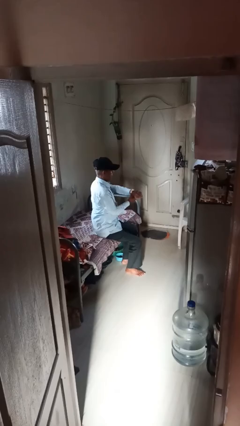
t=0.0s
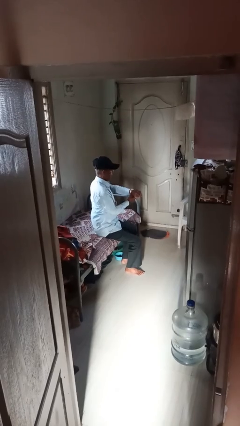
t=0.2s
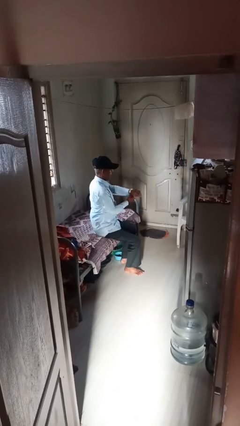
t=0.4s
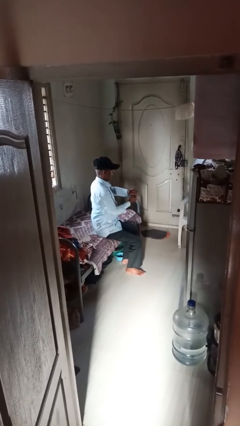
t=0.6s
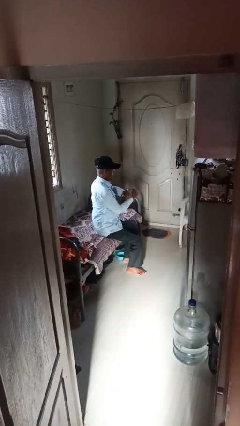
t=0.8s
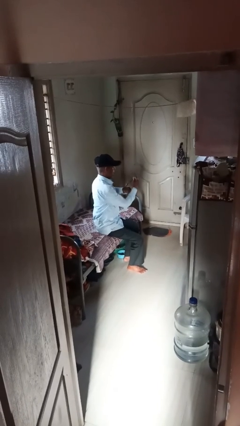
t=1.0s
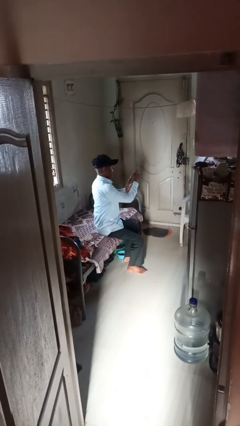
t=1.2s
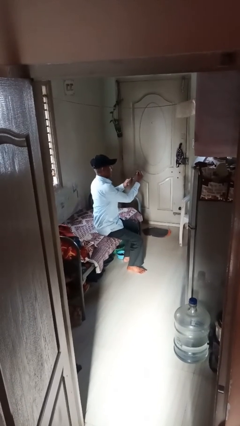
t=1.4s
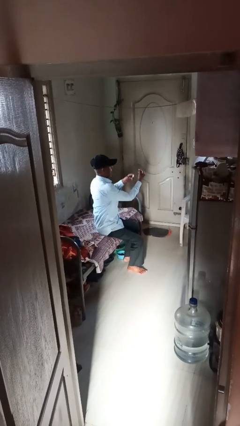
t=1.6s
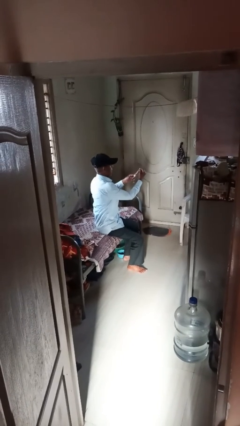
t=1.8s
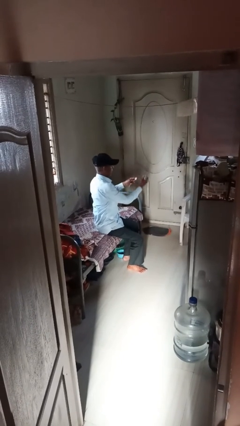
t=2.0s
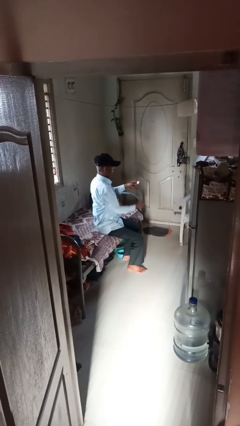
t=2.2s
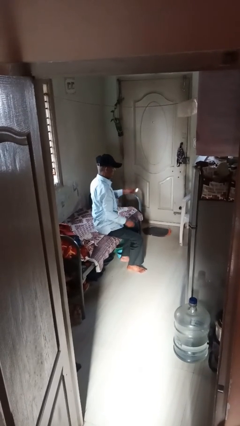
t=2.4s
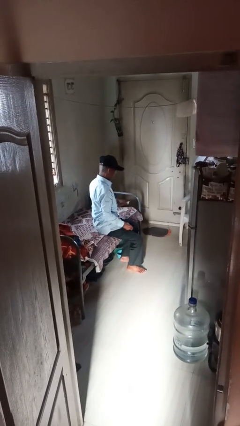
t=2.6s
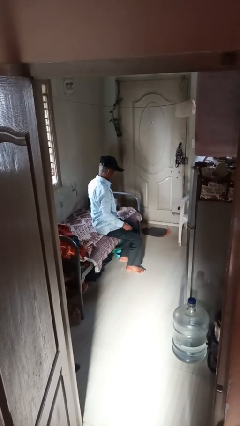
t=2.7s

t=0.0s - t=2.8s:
person takes off wristwatch

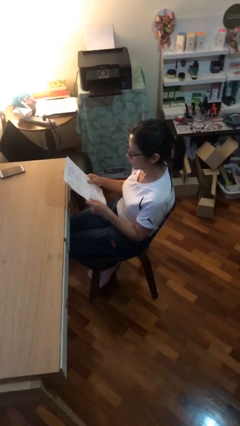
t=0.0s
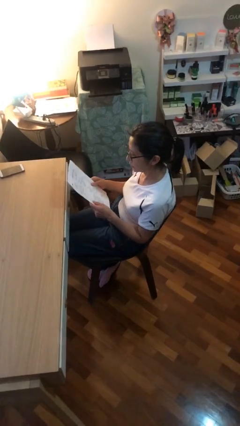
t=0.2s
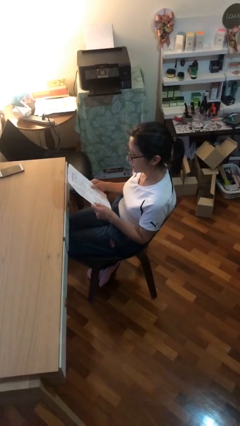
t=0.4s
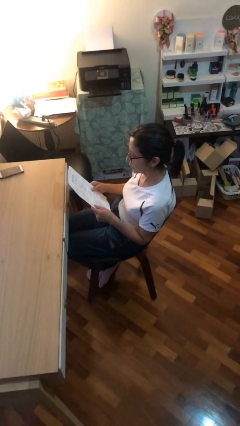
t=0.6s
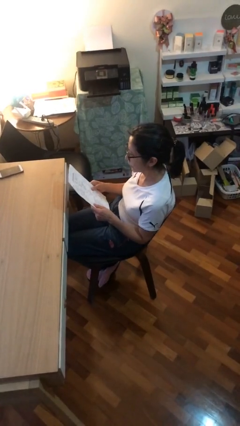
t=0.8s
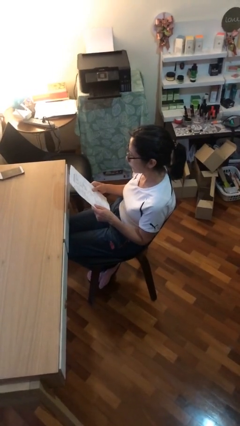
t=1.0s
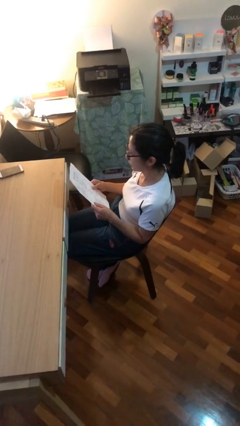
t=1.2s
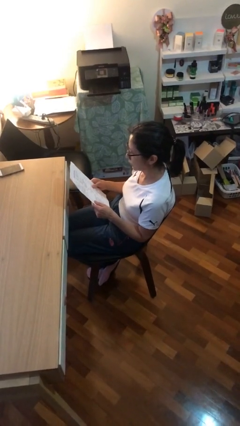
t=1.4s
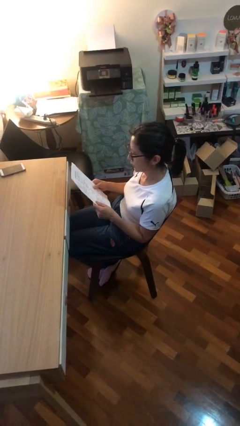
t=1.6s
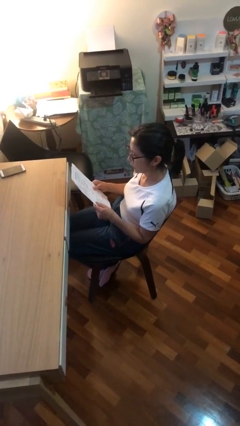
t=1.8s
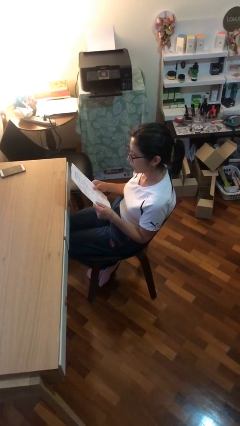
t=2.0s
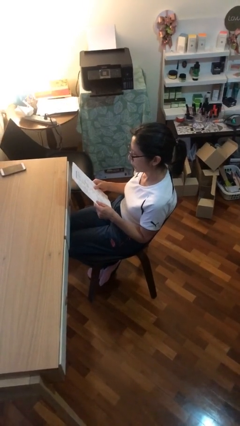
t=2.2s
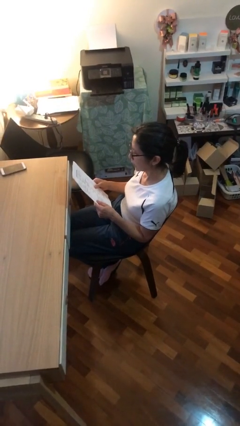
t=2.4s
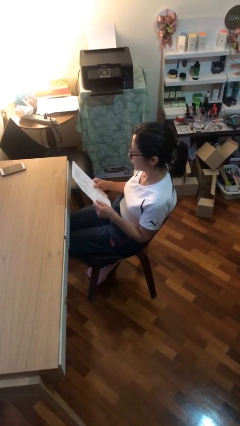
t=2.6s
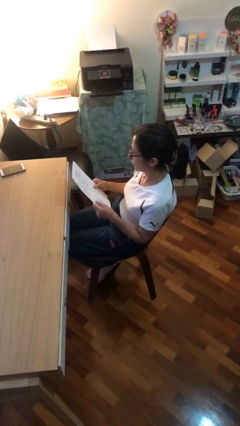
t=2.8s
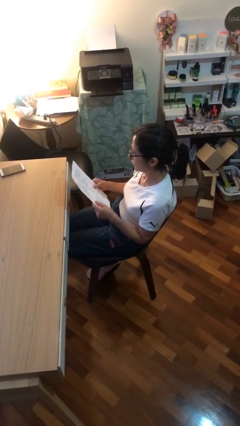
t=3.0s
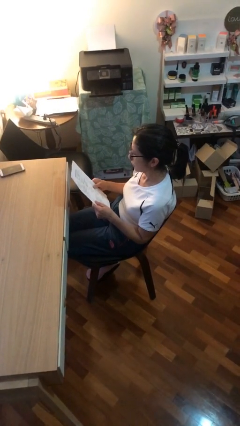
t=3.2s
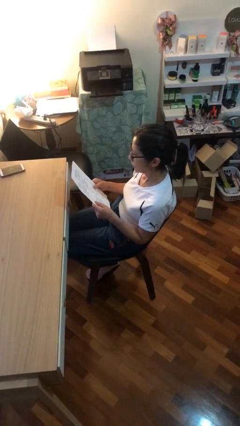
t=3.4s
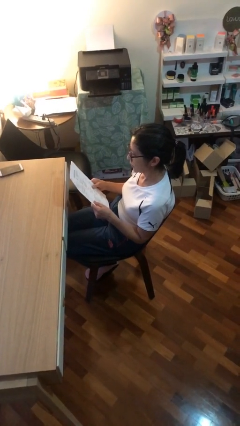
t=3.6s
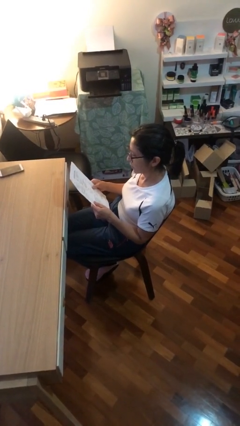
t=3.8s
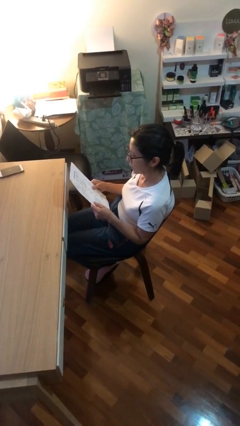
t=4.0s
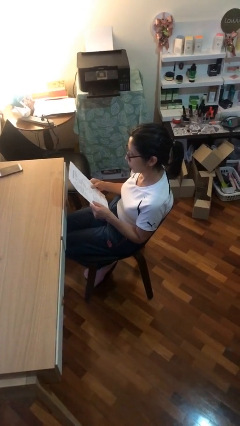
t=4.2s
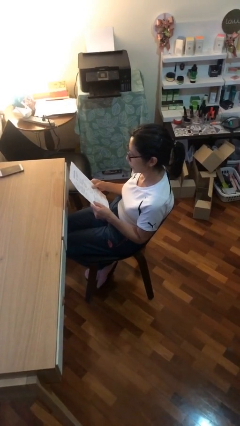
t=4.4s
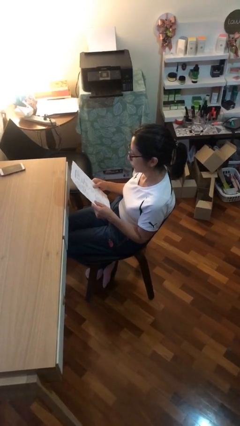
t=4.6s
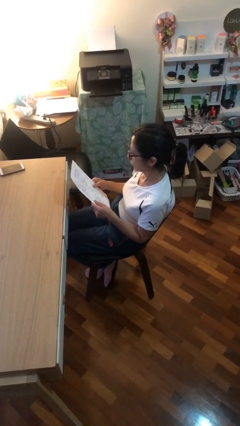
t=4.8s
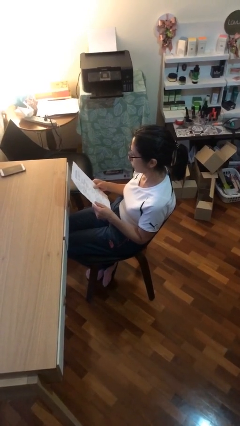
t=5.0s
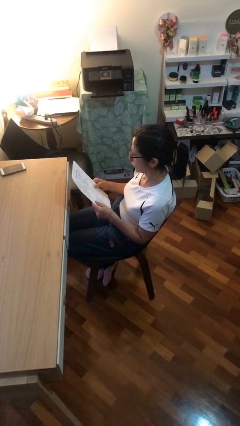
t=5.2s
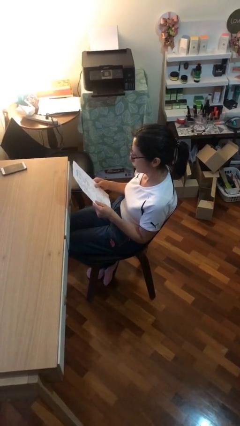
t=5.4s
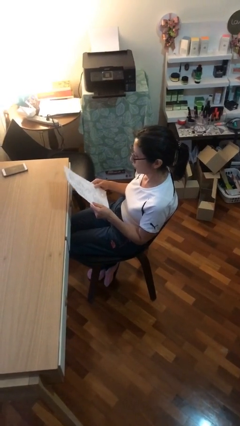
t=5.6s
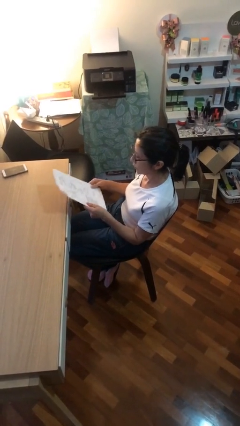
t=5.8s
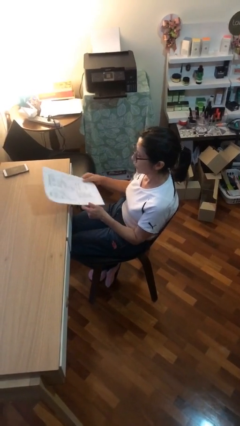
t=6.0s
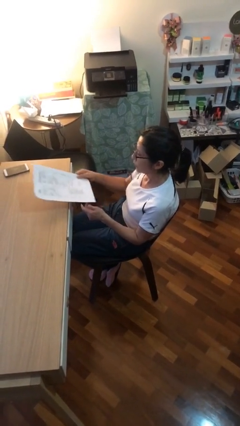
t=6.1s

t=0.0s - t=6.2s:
person reads document

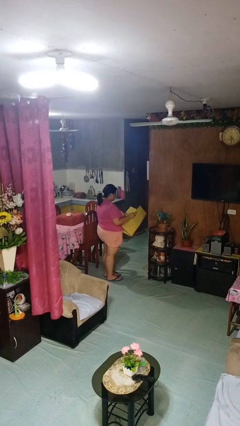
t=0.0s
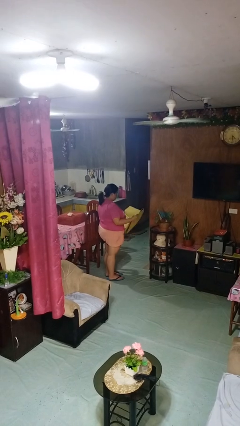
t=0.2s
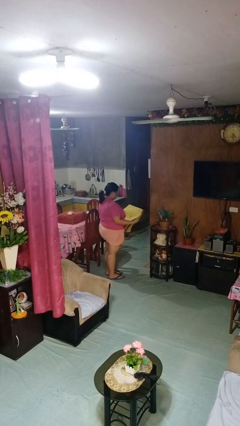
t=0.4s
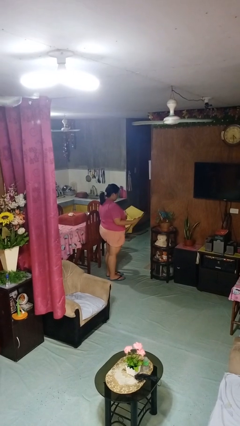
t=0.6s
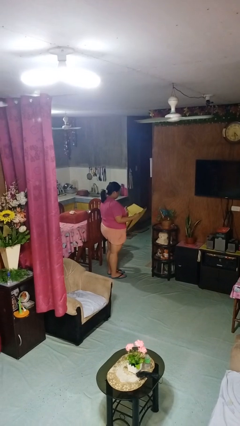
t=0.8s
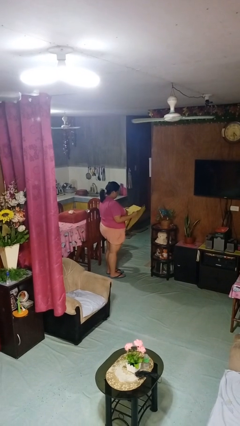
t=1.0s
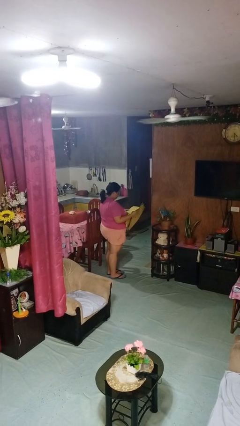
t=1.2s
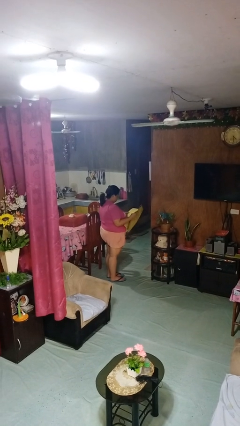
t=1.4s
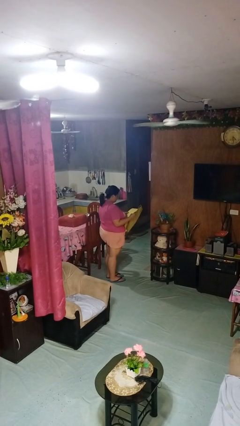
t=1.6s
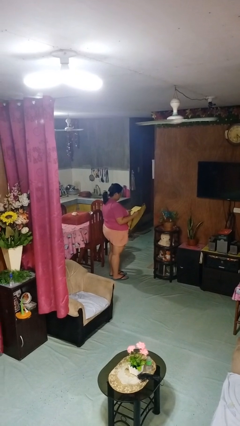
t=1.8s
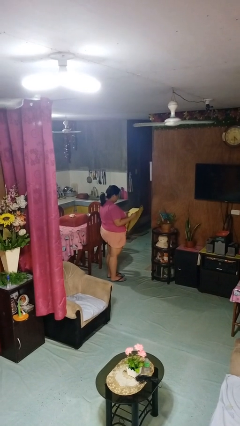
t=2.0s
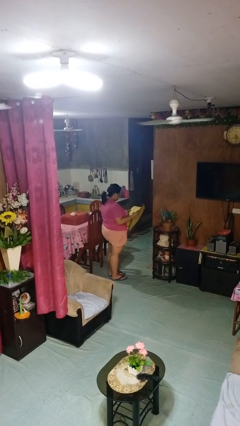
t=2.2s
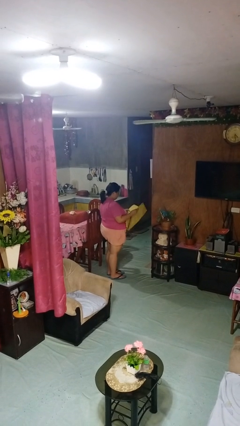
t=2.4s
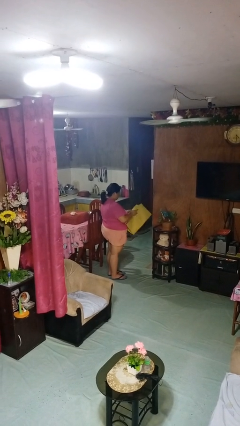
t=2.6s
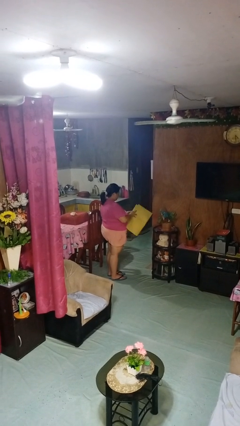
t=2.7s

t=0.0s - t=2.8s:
person reads newspaper

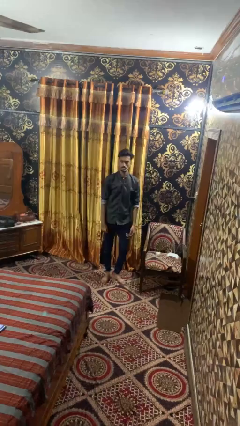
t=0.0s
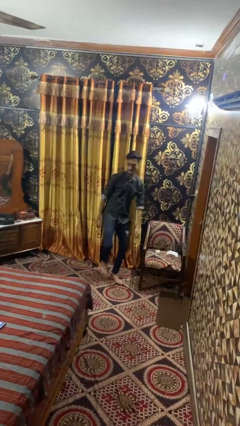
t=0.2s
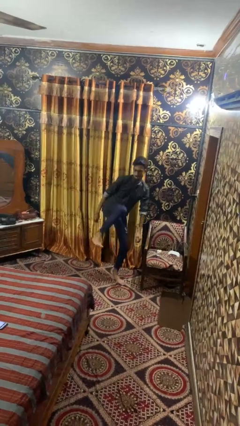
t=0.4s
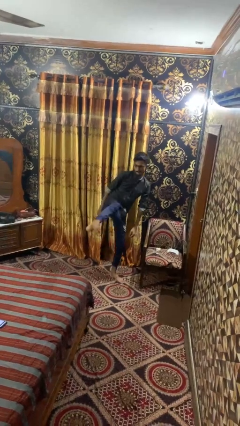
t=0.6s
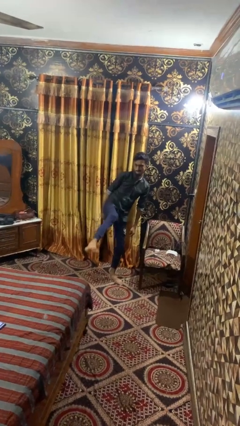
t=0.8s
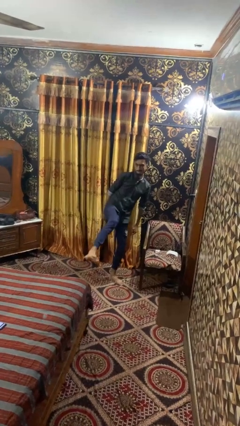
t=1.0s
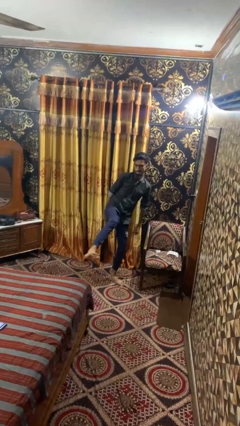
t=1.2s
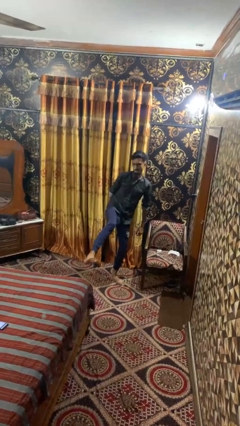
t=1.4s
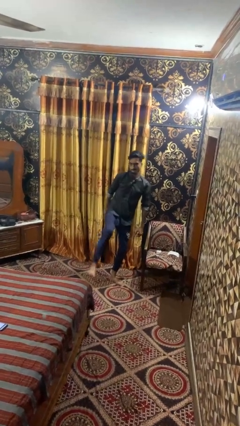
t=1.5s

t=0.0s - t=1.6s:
person karate kicks

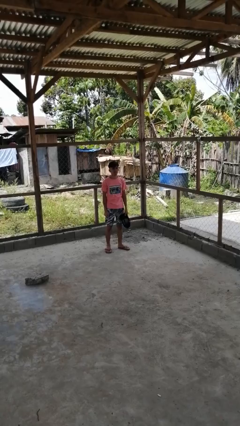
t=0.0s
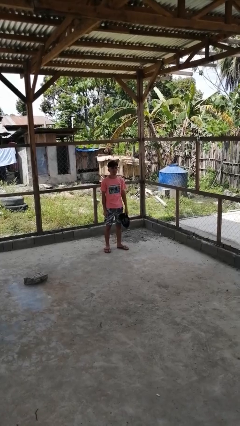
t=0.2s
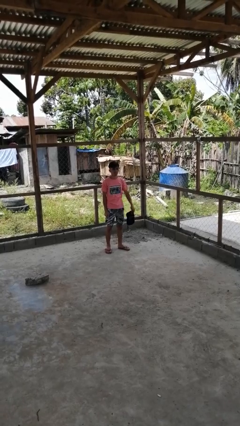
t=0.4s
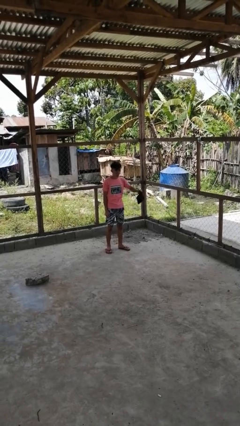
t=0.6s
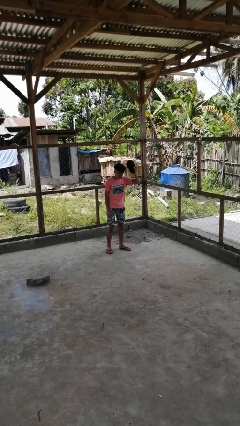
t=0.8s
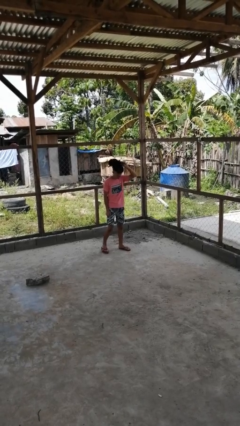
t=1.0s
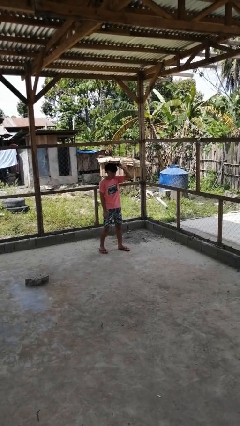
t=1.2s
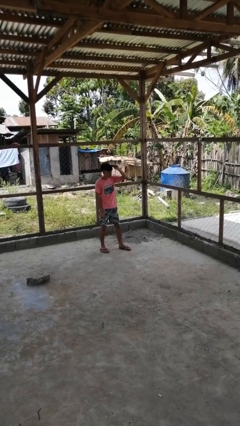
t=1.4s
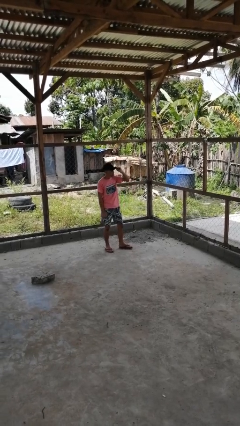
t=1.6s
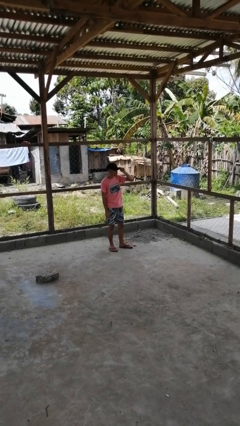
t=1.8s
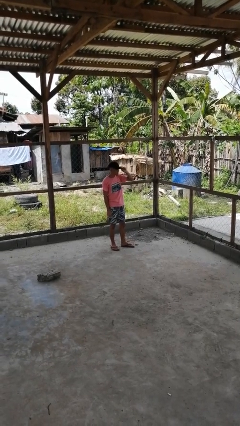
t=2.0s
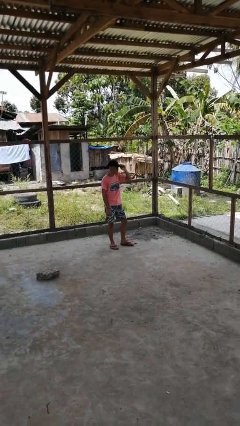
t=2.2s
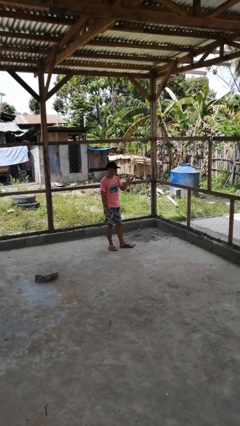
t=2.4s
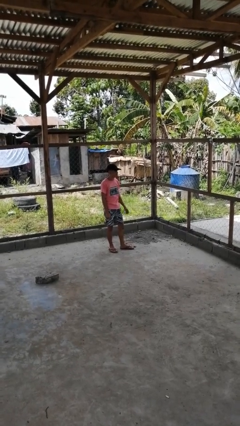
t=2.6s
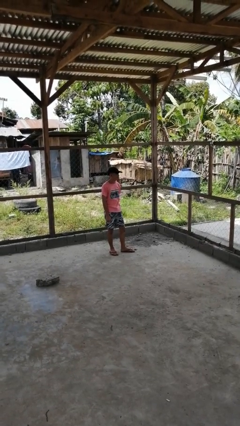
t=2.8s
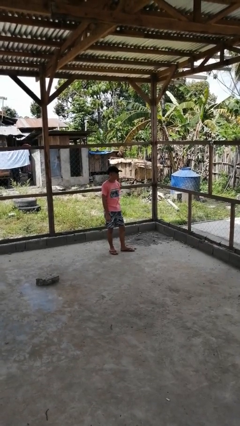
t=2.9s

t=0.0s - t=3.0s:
person puts on hat

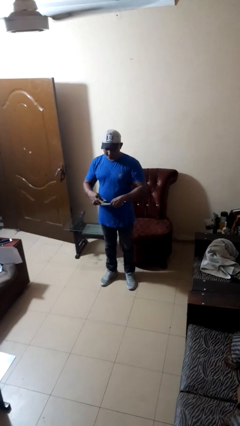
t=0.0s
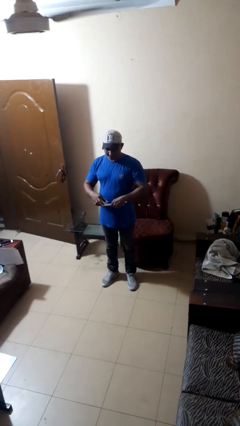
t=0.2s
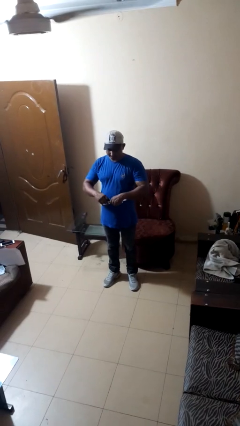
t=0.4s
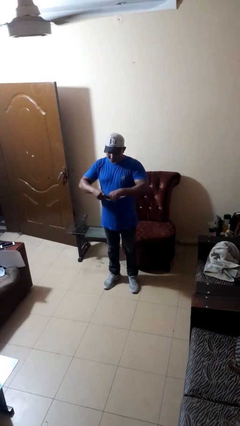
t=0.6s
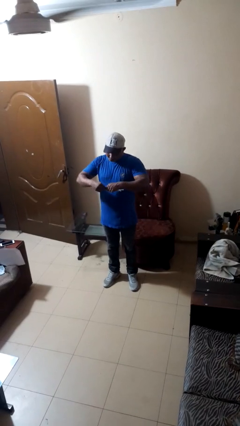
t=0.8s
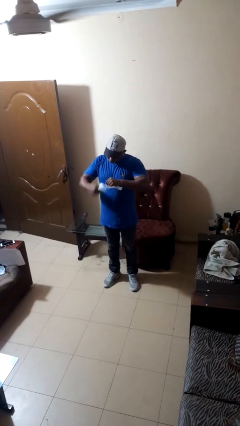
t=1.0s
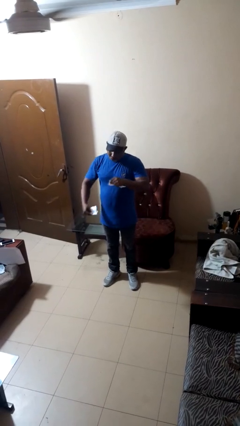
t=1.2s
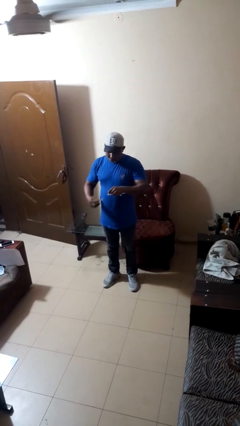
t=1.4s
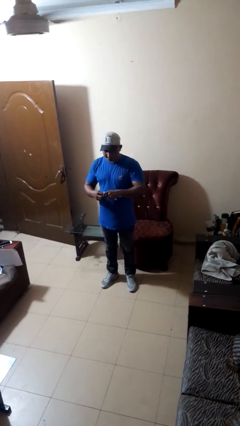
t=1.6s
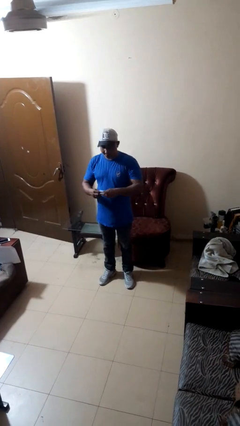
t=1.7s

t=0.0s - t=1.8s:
person tears paper
